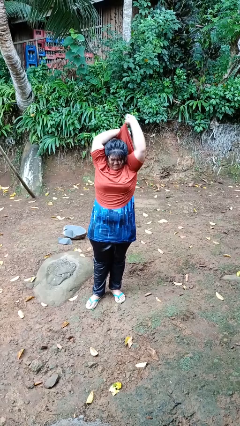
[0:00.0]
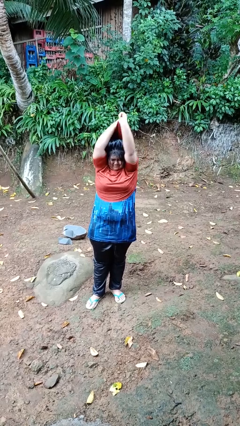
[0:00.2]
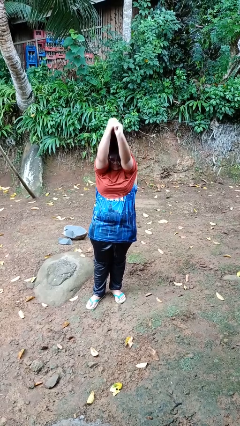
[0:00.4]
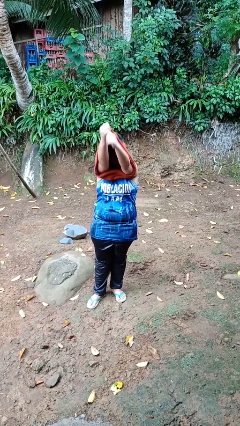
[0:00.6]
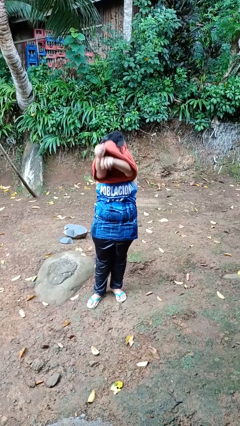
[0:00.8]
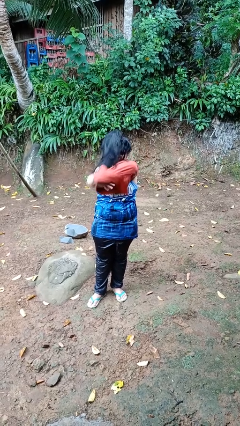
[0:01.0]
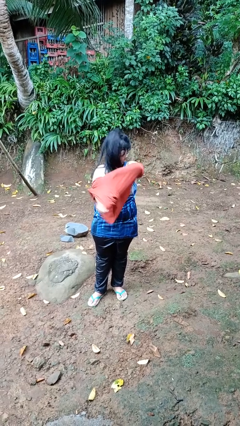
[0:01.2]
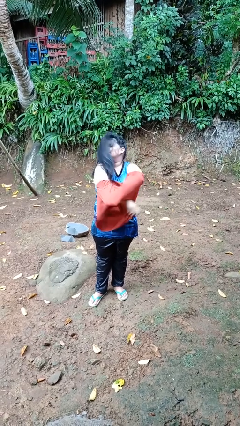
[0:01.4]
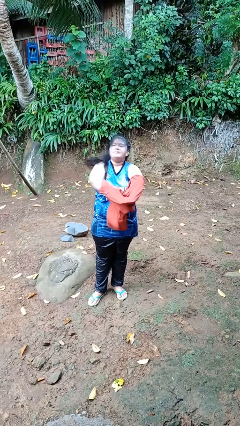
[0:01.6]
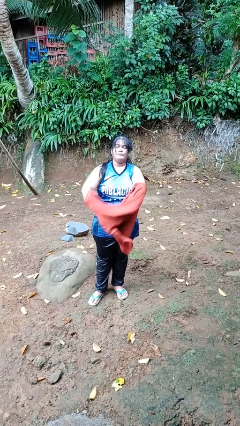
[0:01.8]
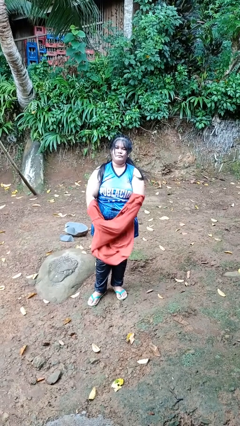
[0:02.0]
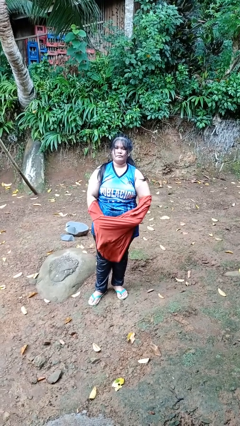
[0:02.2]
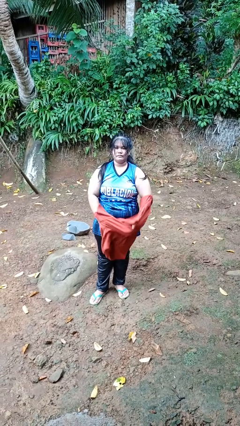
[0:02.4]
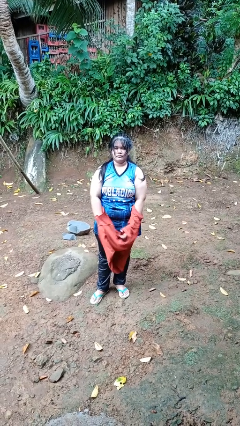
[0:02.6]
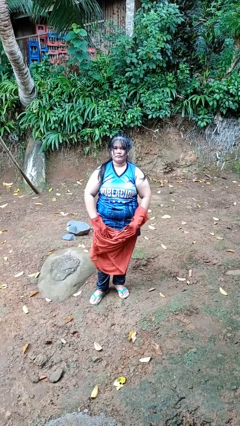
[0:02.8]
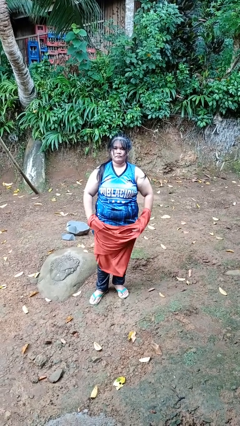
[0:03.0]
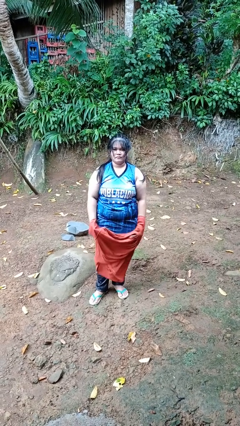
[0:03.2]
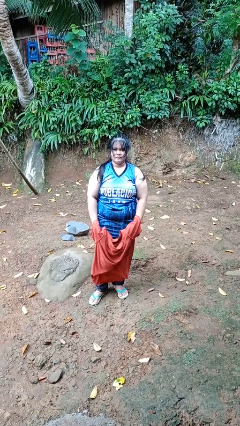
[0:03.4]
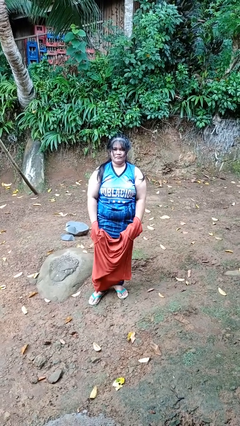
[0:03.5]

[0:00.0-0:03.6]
person takes off shirt

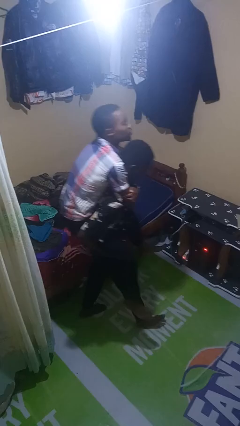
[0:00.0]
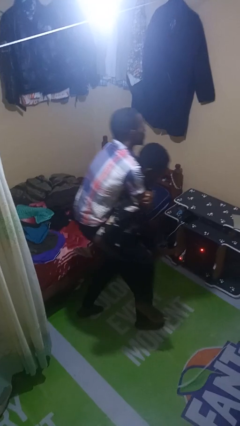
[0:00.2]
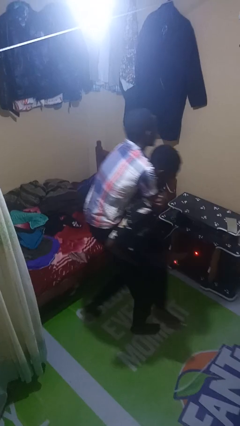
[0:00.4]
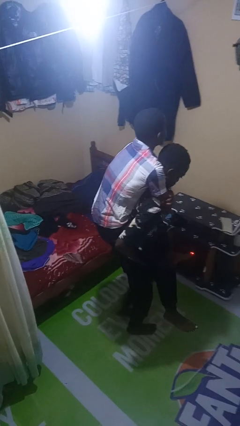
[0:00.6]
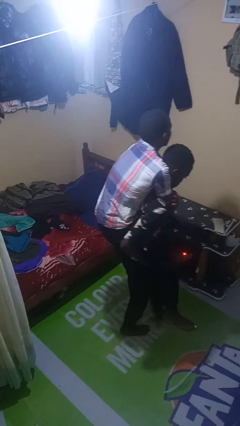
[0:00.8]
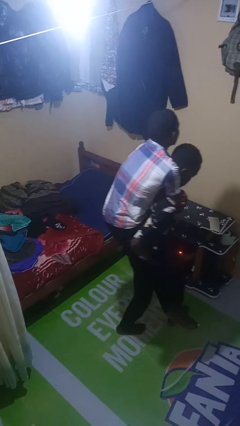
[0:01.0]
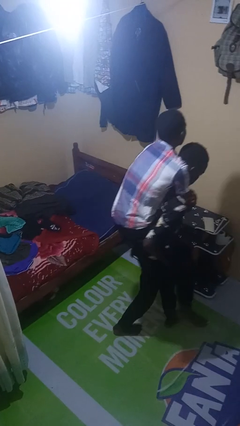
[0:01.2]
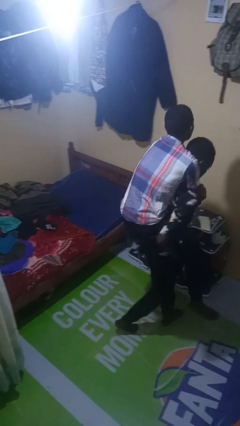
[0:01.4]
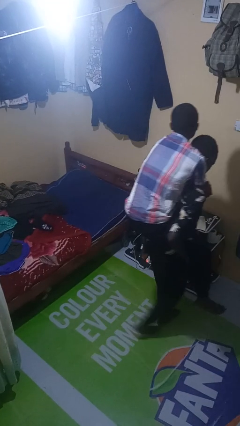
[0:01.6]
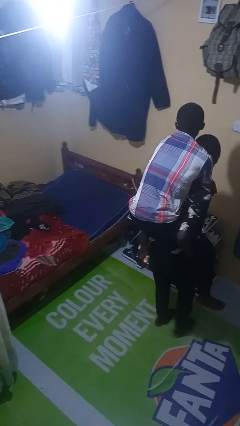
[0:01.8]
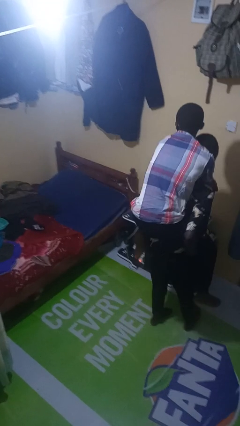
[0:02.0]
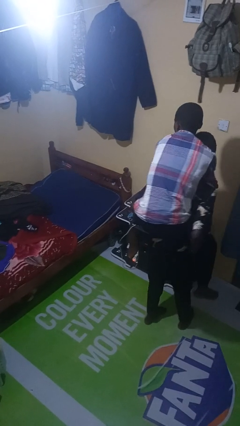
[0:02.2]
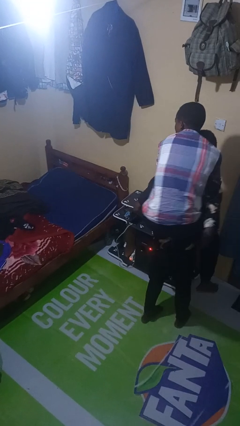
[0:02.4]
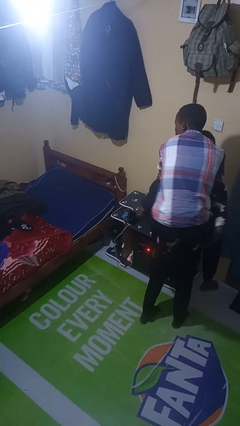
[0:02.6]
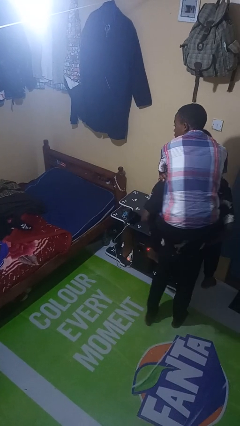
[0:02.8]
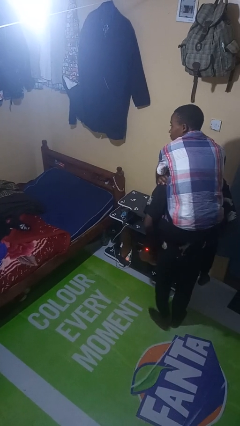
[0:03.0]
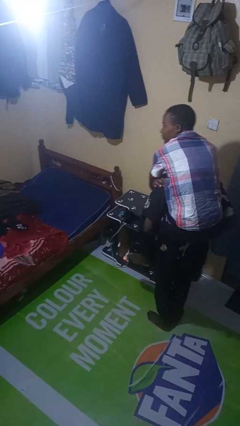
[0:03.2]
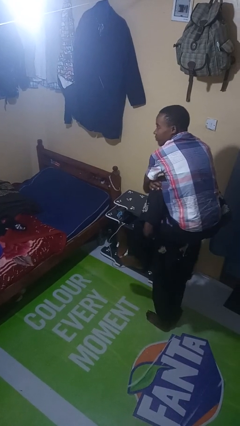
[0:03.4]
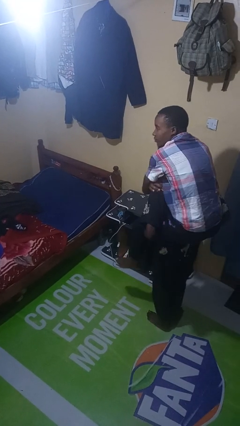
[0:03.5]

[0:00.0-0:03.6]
person carries person on back

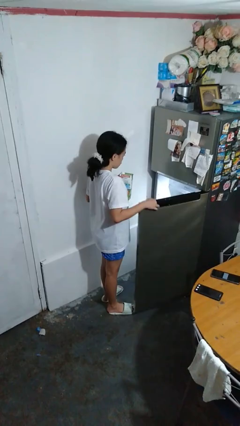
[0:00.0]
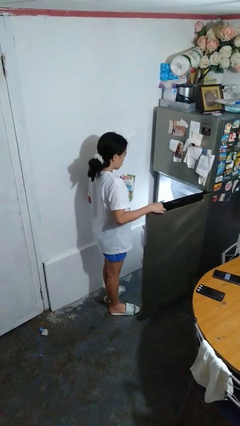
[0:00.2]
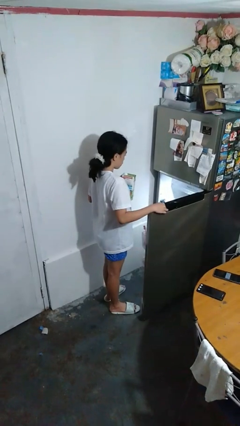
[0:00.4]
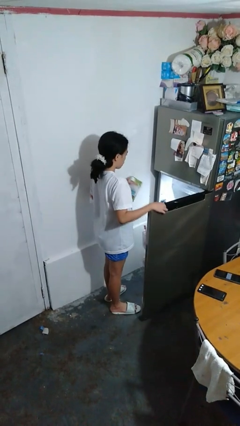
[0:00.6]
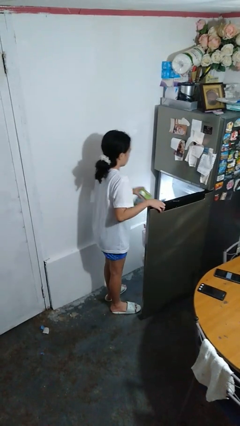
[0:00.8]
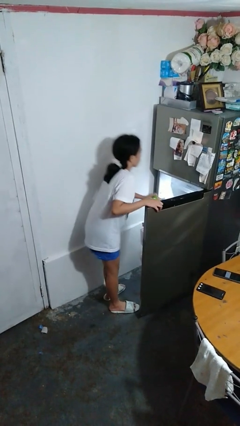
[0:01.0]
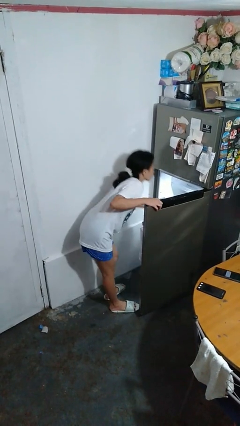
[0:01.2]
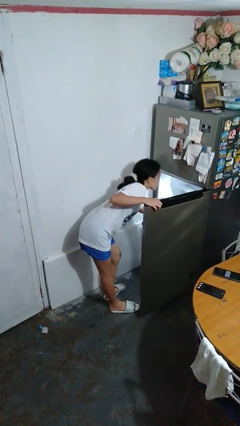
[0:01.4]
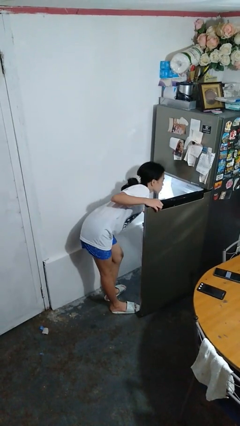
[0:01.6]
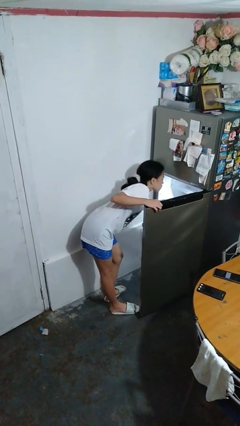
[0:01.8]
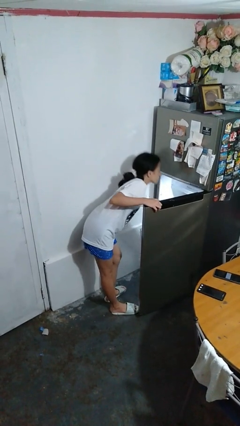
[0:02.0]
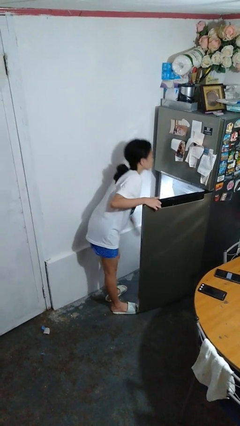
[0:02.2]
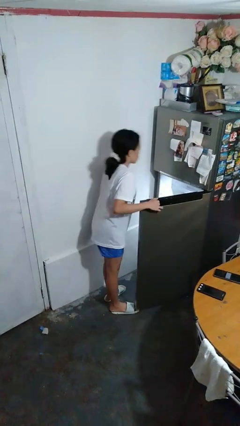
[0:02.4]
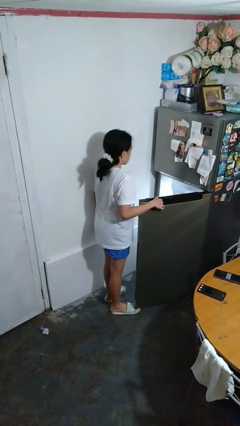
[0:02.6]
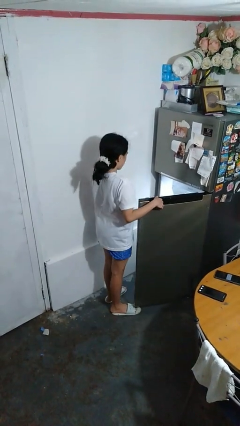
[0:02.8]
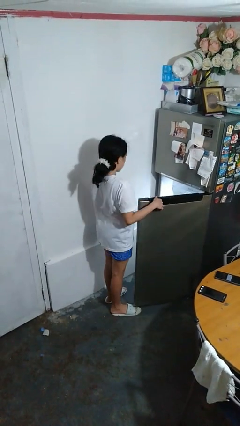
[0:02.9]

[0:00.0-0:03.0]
person puts object into refrigerator

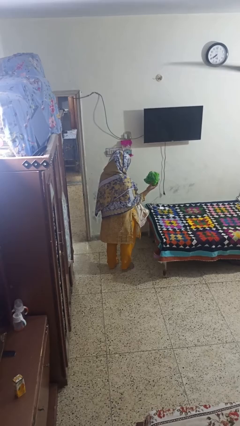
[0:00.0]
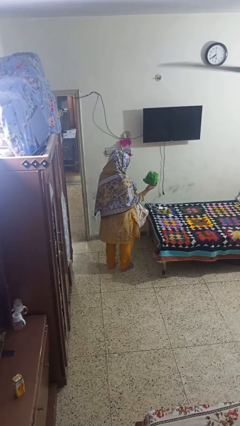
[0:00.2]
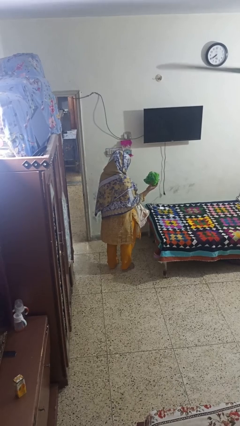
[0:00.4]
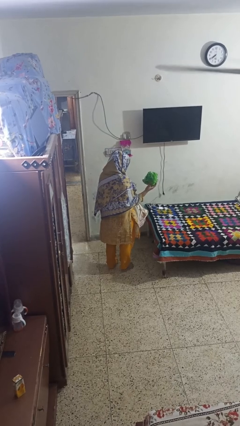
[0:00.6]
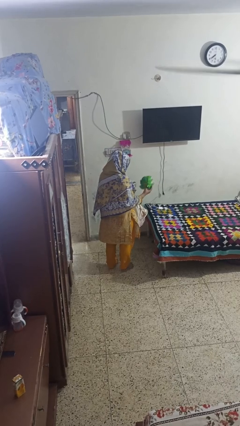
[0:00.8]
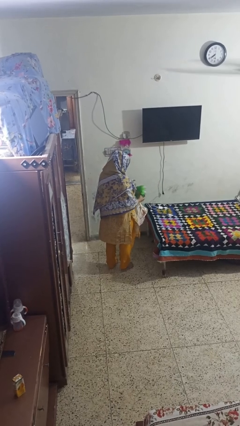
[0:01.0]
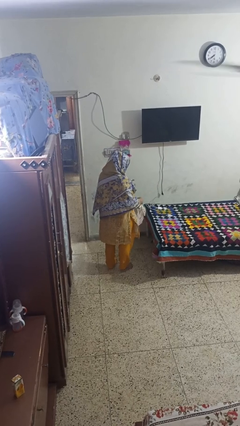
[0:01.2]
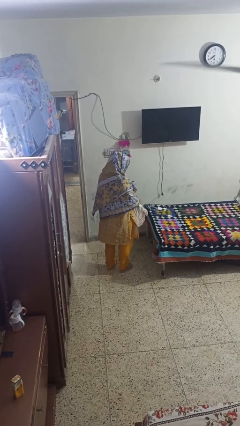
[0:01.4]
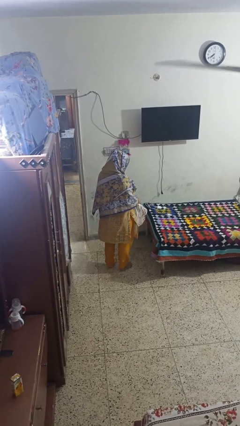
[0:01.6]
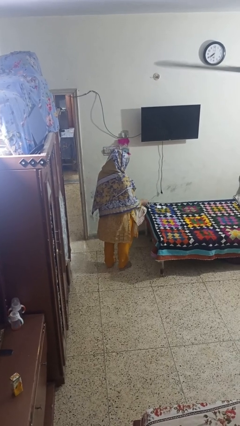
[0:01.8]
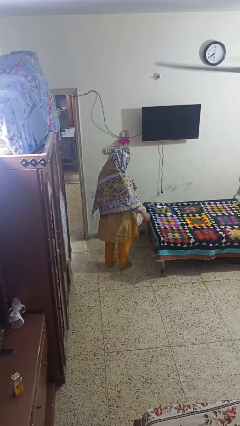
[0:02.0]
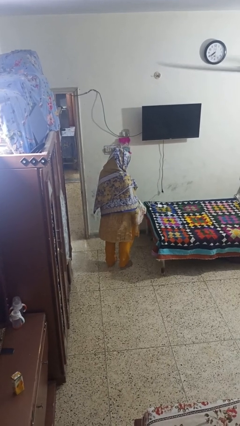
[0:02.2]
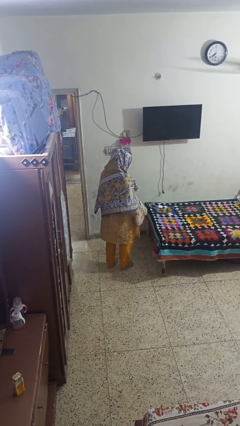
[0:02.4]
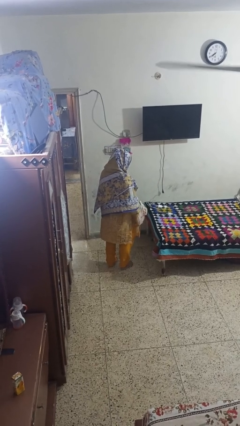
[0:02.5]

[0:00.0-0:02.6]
person puts object into bag

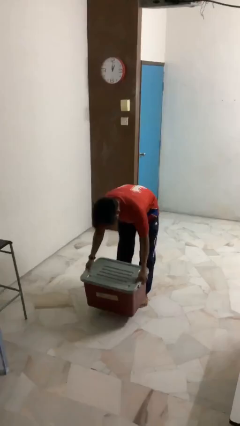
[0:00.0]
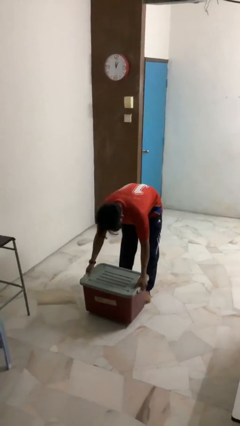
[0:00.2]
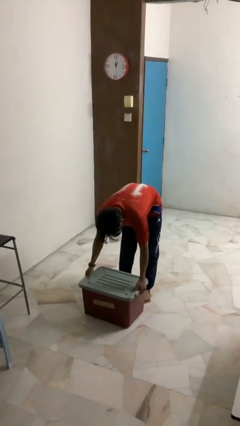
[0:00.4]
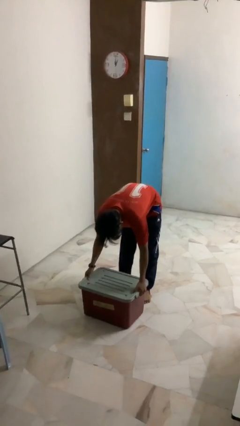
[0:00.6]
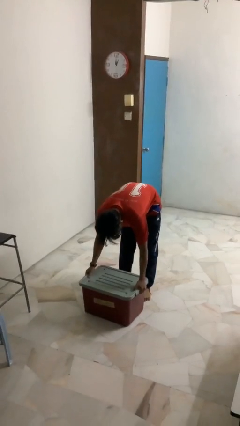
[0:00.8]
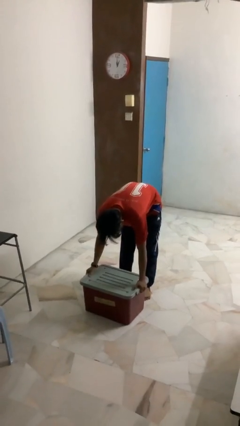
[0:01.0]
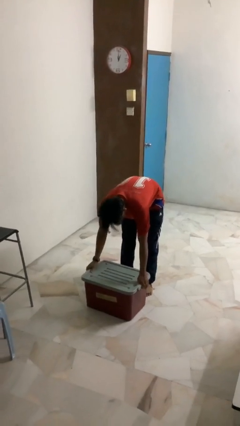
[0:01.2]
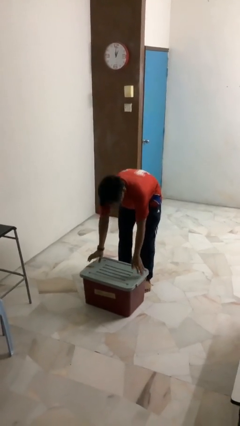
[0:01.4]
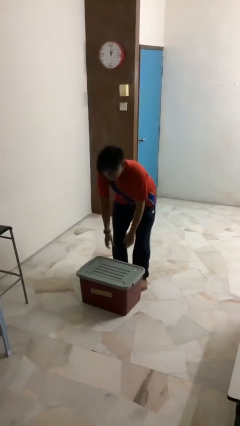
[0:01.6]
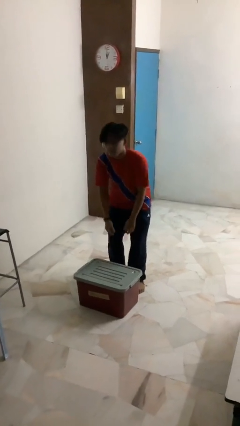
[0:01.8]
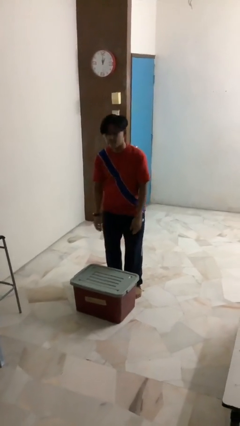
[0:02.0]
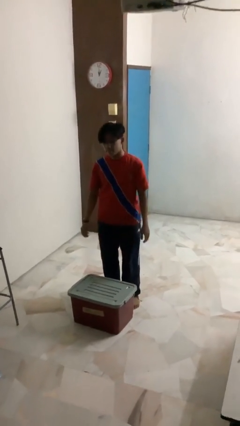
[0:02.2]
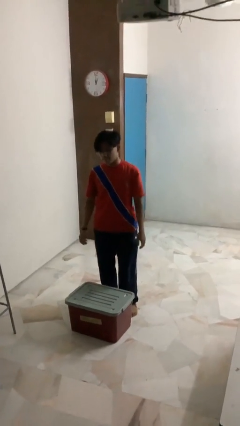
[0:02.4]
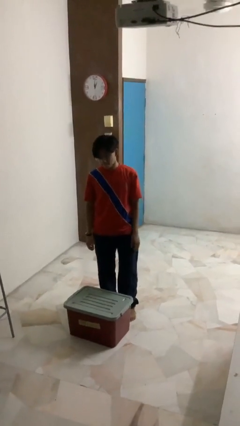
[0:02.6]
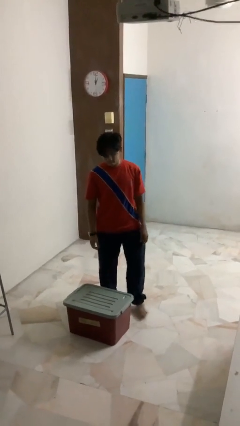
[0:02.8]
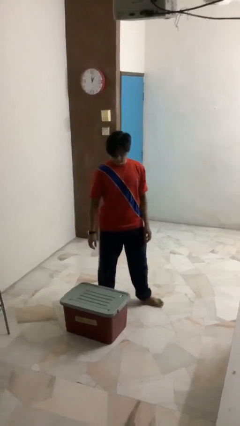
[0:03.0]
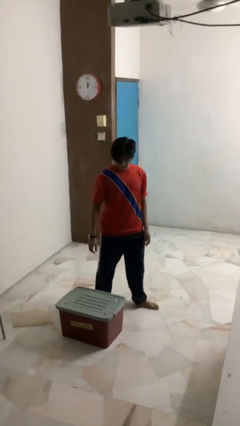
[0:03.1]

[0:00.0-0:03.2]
person puts down object on floor

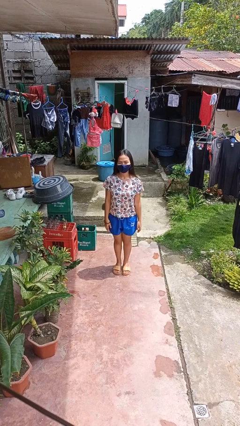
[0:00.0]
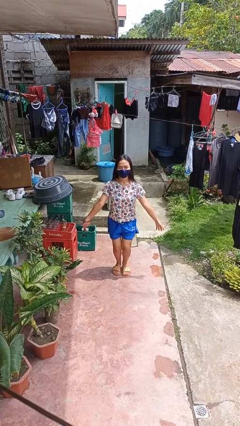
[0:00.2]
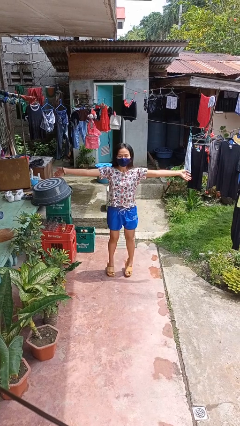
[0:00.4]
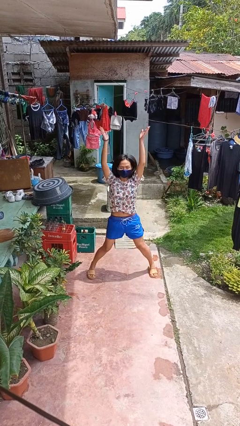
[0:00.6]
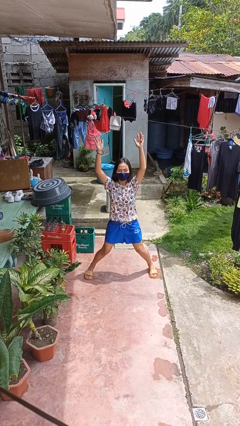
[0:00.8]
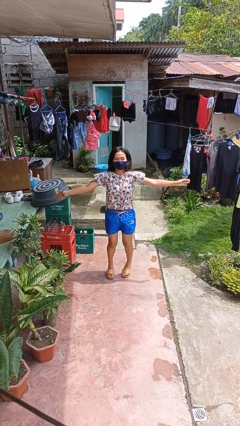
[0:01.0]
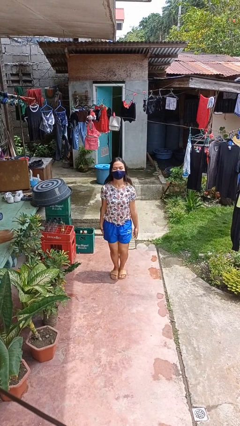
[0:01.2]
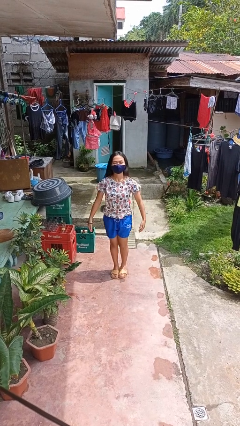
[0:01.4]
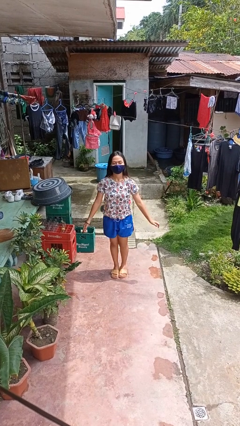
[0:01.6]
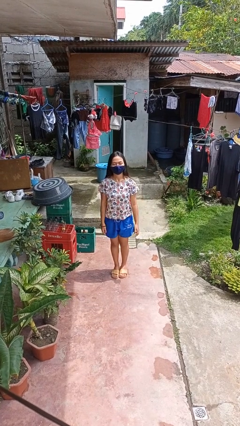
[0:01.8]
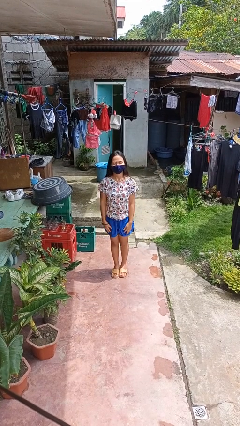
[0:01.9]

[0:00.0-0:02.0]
person exercises with jumping jacks
